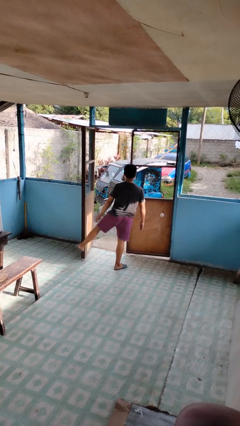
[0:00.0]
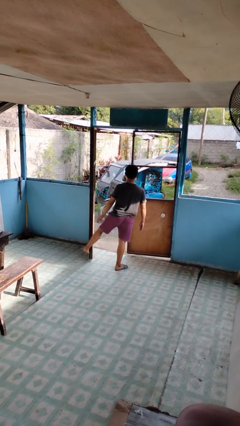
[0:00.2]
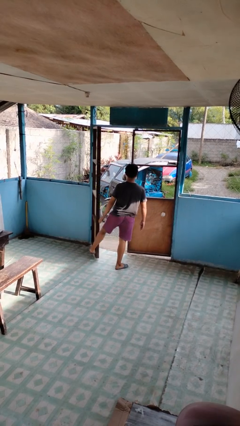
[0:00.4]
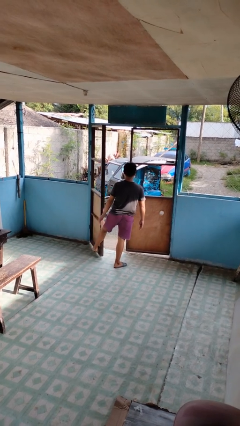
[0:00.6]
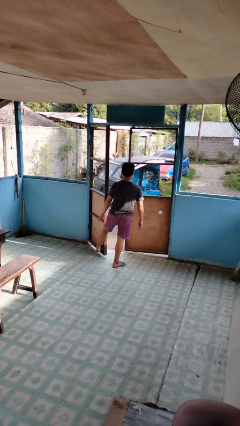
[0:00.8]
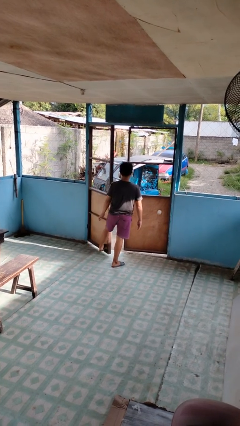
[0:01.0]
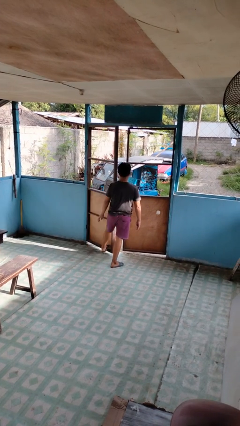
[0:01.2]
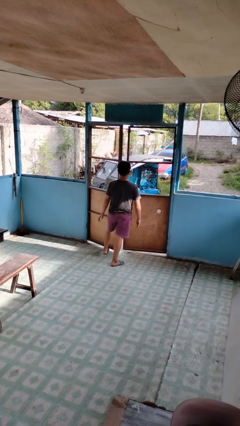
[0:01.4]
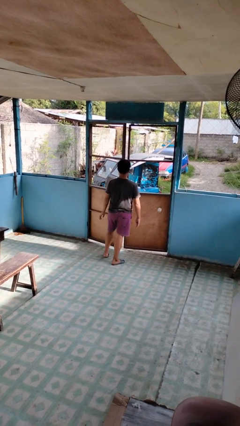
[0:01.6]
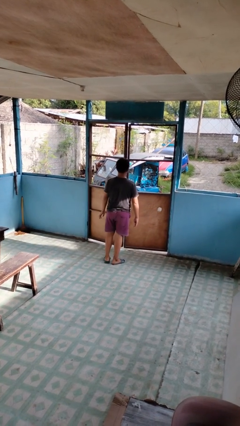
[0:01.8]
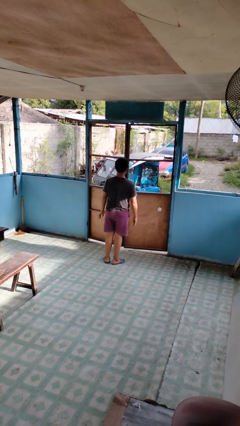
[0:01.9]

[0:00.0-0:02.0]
person closes door with foot

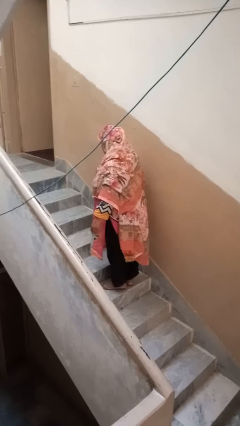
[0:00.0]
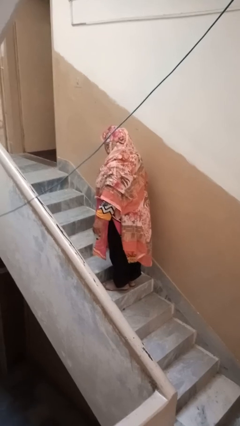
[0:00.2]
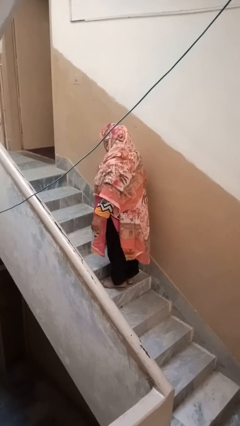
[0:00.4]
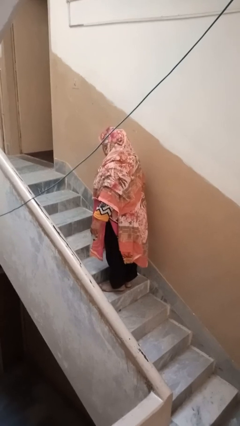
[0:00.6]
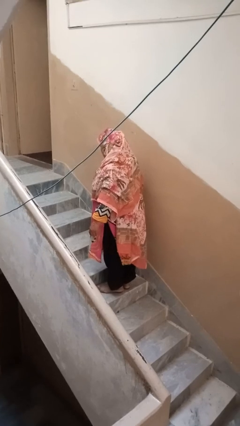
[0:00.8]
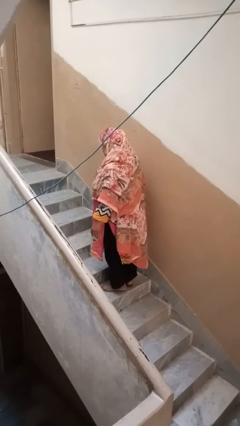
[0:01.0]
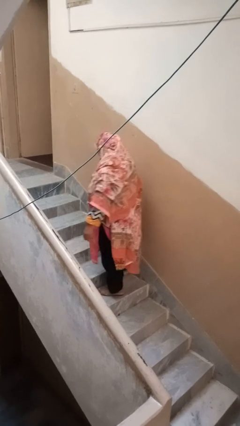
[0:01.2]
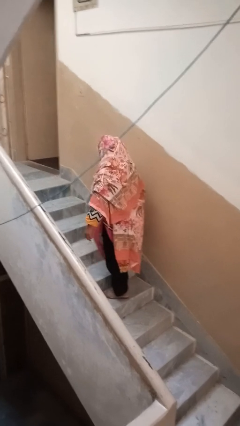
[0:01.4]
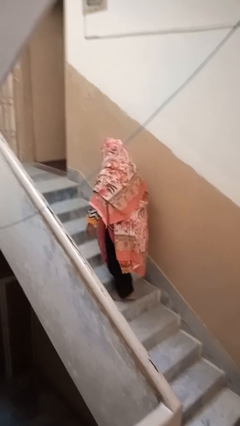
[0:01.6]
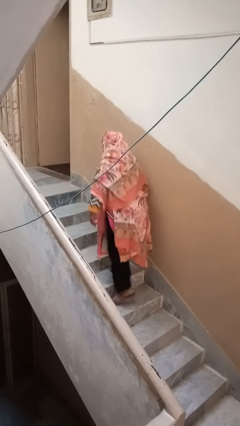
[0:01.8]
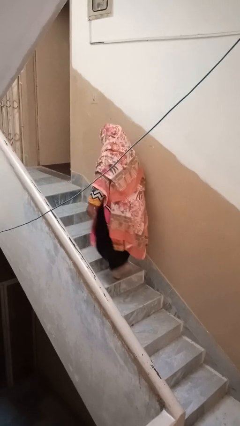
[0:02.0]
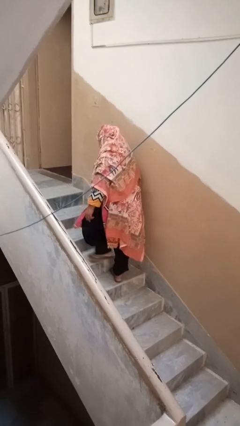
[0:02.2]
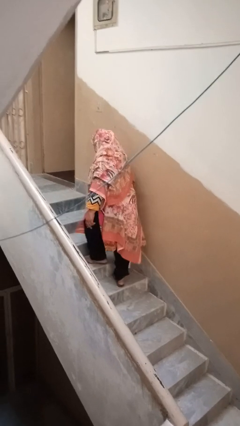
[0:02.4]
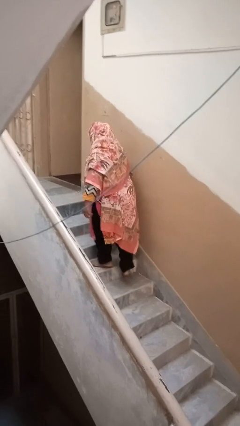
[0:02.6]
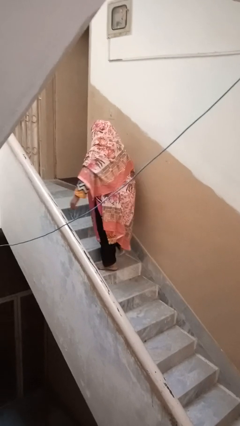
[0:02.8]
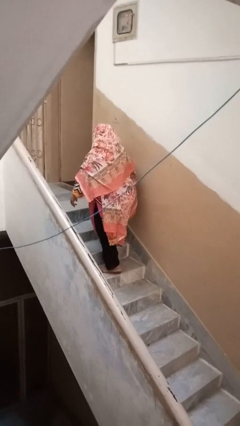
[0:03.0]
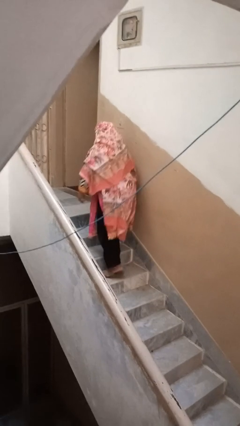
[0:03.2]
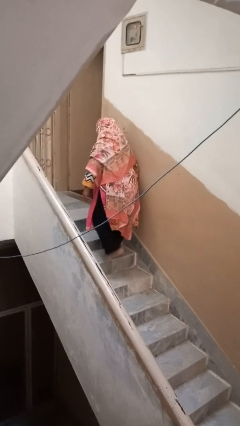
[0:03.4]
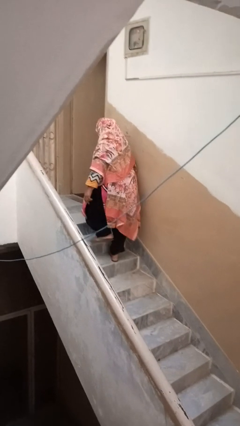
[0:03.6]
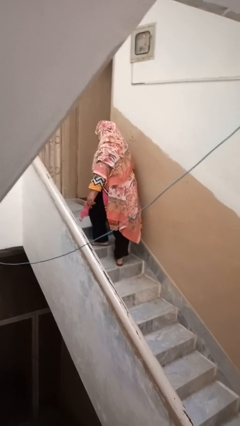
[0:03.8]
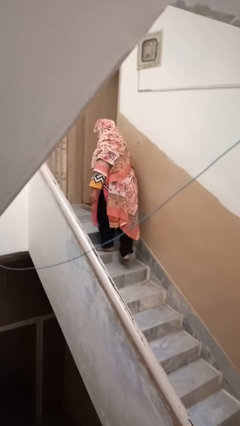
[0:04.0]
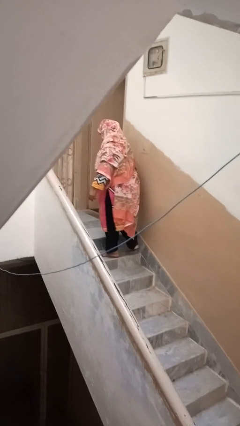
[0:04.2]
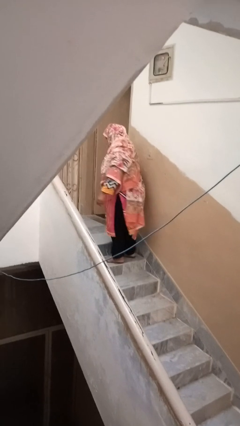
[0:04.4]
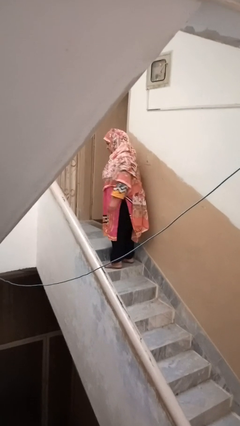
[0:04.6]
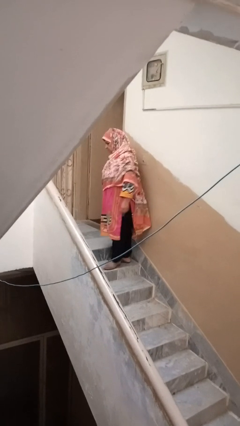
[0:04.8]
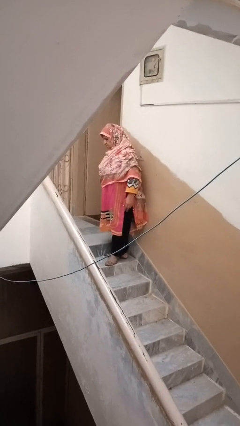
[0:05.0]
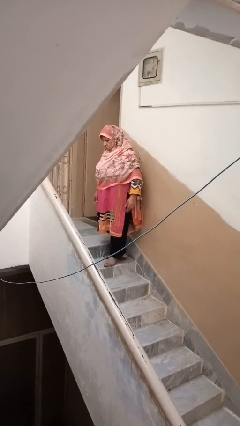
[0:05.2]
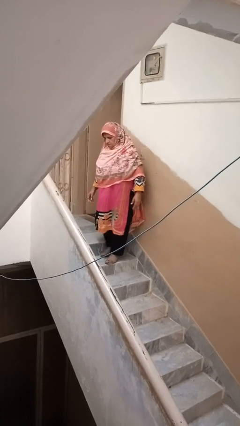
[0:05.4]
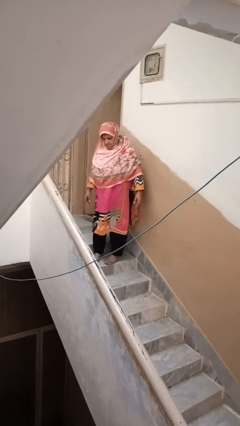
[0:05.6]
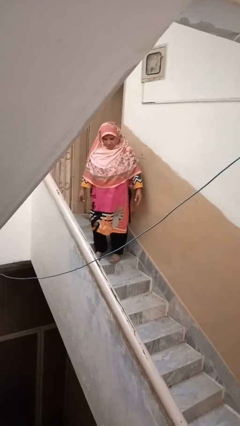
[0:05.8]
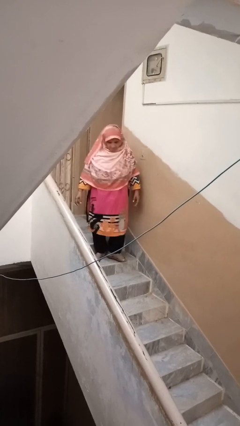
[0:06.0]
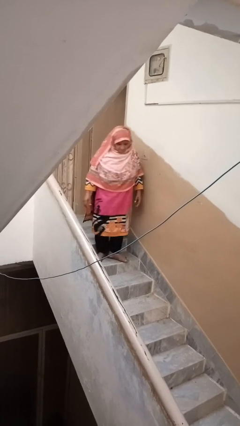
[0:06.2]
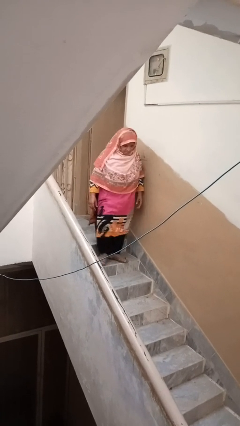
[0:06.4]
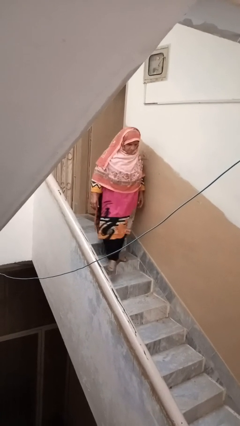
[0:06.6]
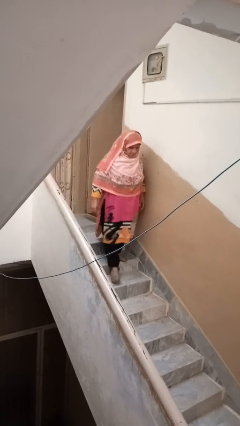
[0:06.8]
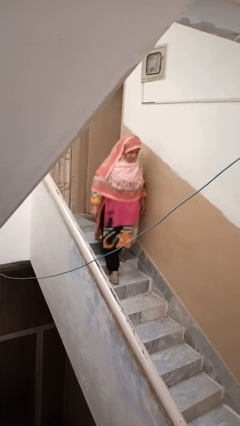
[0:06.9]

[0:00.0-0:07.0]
person climbs up stairs

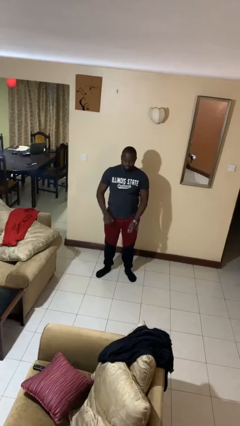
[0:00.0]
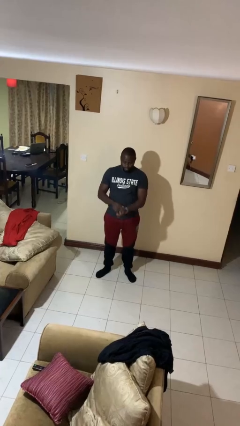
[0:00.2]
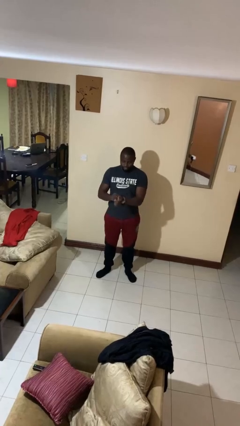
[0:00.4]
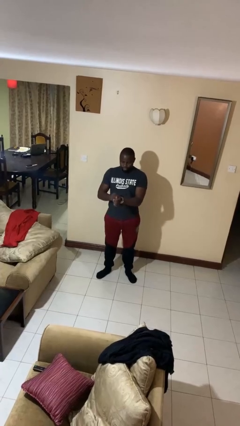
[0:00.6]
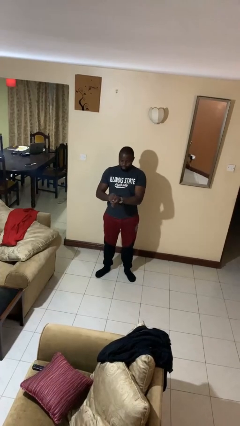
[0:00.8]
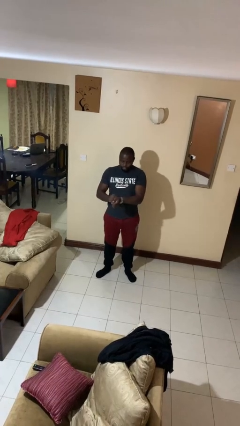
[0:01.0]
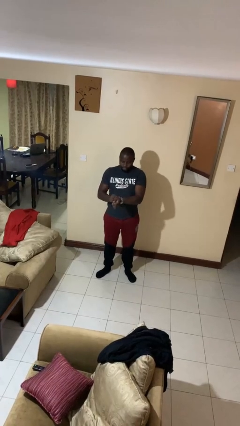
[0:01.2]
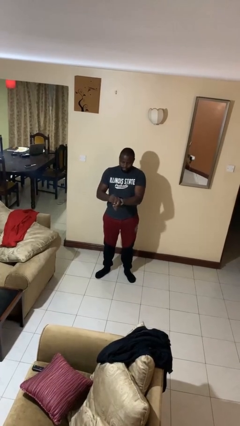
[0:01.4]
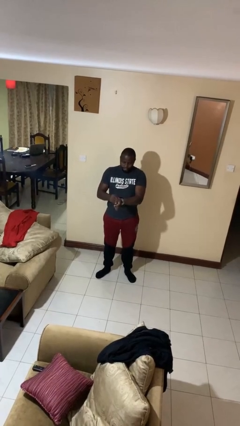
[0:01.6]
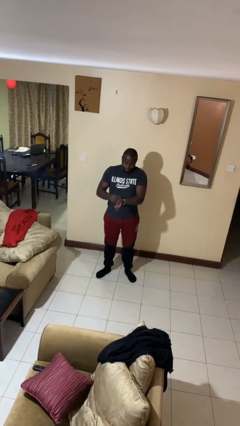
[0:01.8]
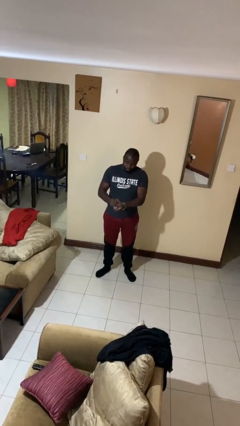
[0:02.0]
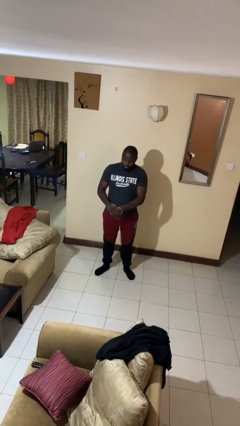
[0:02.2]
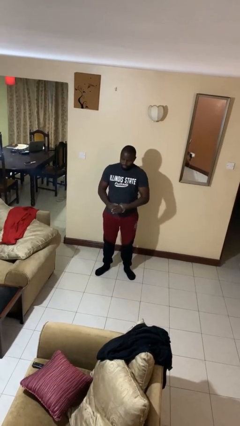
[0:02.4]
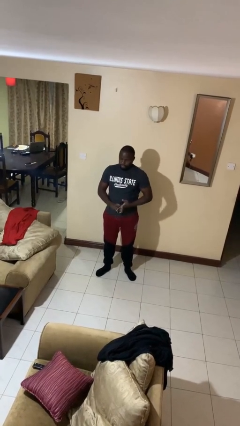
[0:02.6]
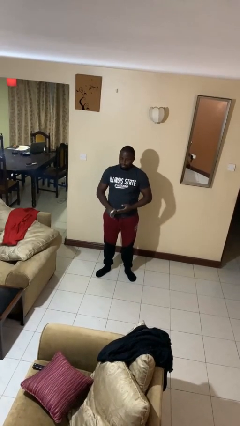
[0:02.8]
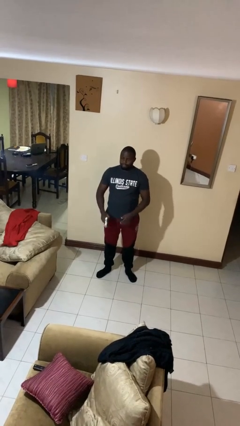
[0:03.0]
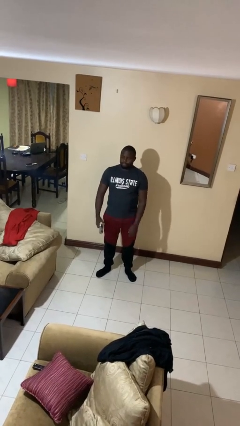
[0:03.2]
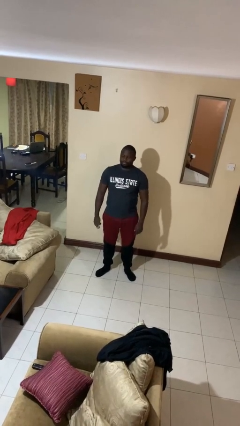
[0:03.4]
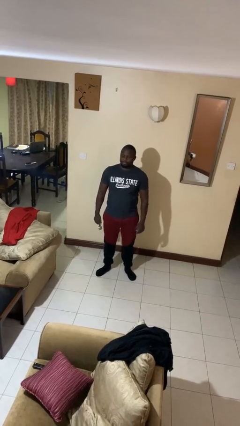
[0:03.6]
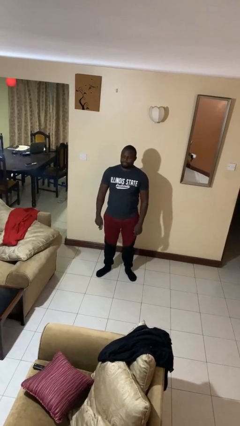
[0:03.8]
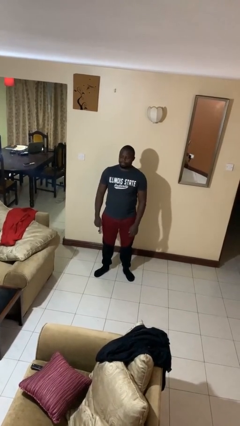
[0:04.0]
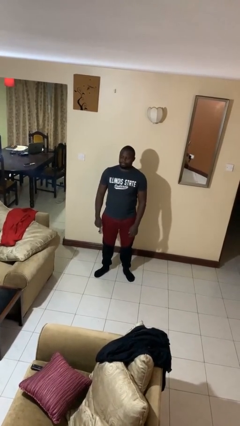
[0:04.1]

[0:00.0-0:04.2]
person takes off wristwatch

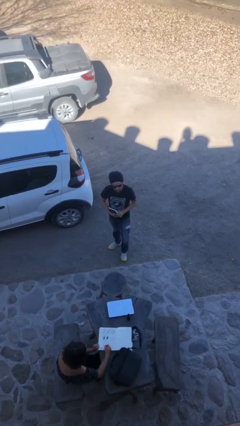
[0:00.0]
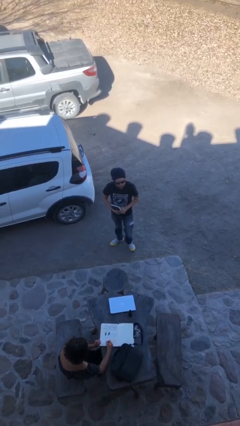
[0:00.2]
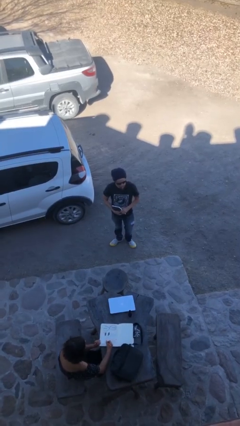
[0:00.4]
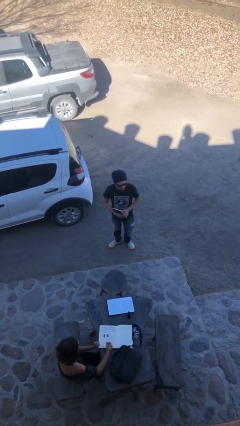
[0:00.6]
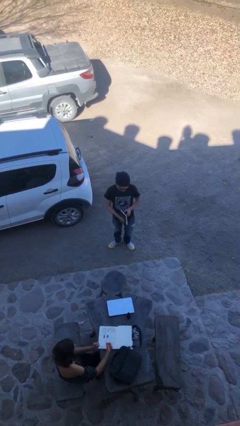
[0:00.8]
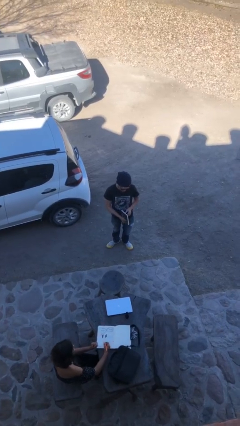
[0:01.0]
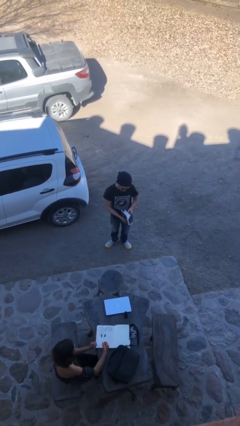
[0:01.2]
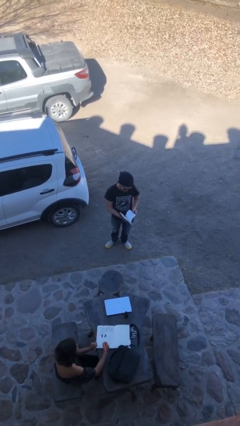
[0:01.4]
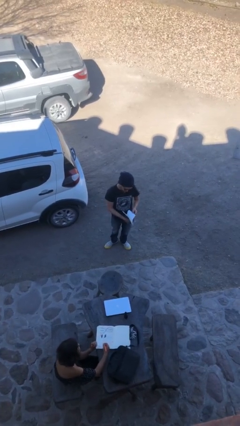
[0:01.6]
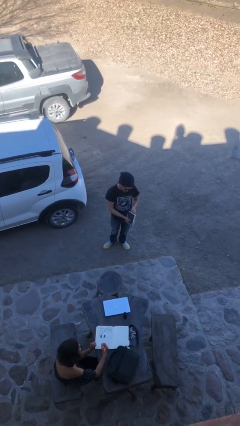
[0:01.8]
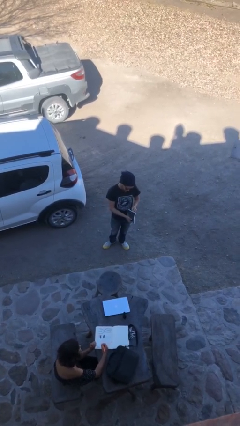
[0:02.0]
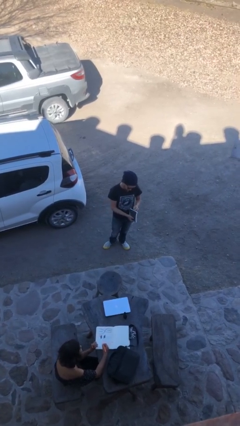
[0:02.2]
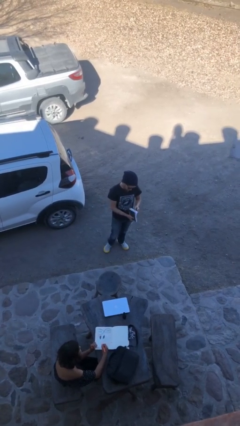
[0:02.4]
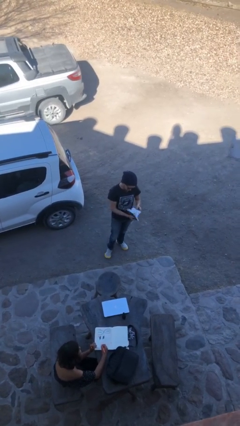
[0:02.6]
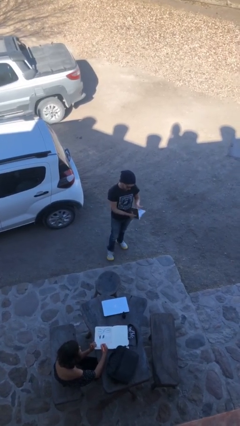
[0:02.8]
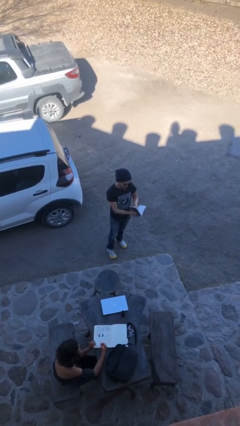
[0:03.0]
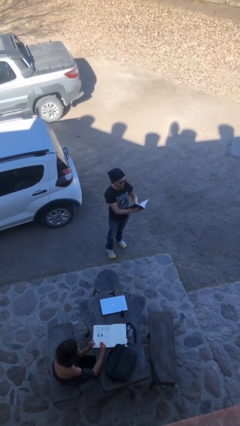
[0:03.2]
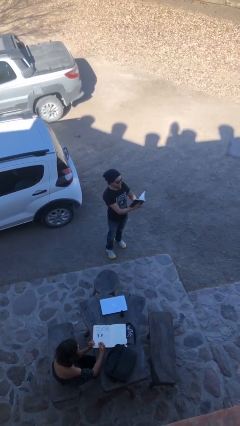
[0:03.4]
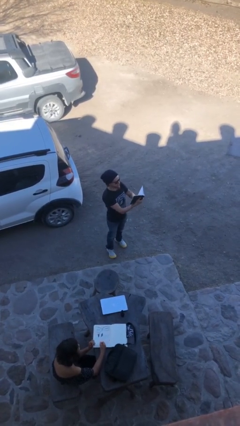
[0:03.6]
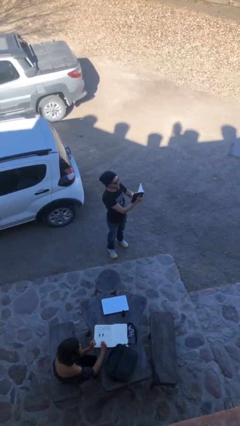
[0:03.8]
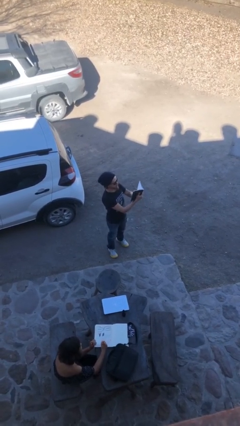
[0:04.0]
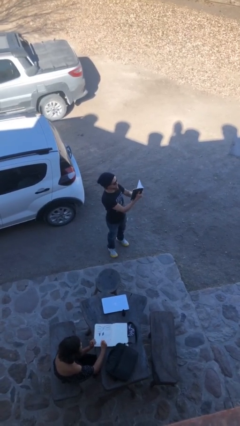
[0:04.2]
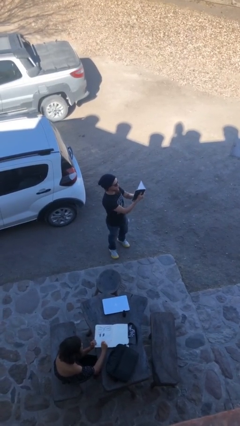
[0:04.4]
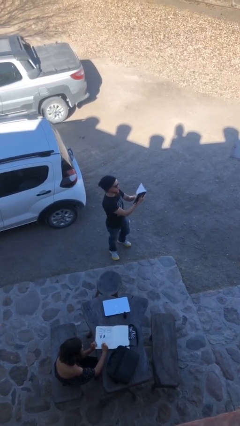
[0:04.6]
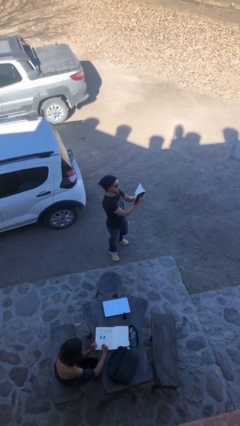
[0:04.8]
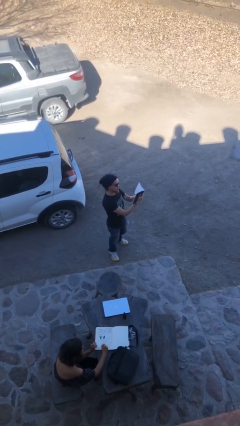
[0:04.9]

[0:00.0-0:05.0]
person reads document
